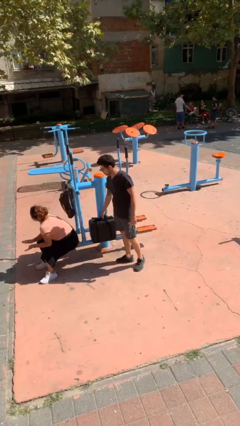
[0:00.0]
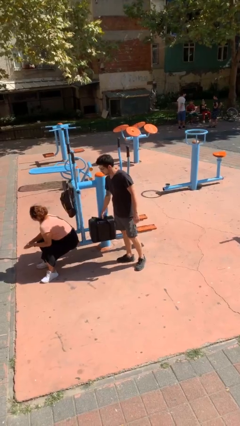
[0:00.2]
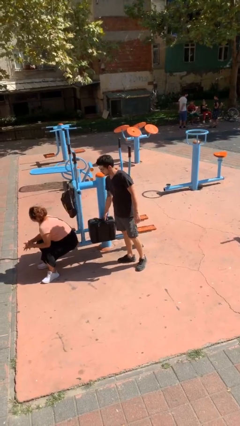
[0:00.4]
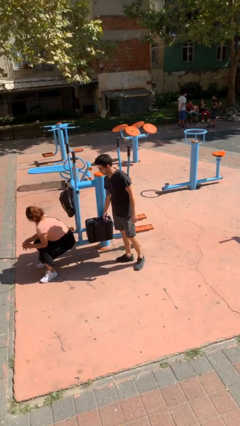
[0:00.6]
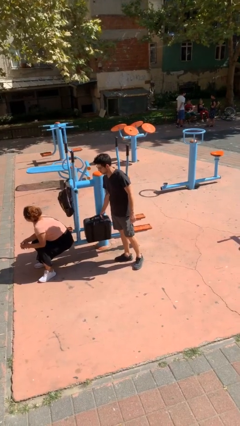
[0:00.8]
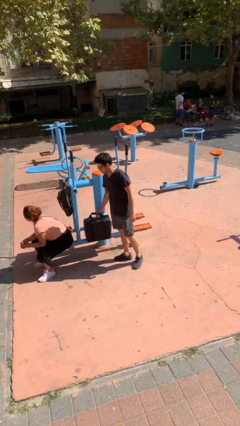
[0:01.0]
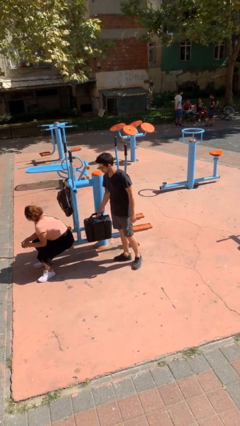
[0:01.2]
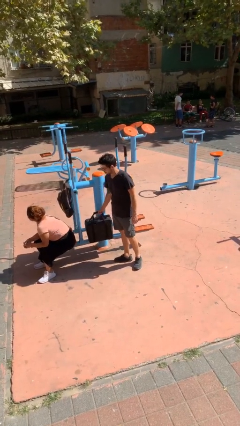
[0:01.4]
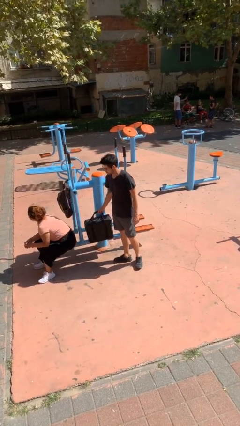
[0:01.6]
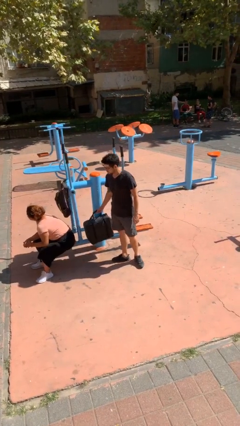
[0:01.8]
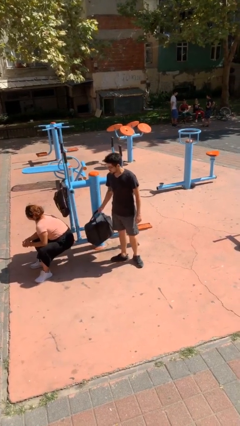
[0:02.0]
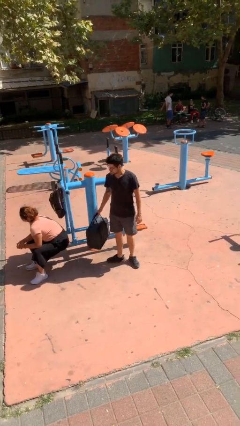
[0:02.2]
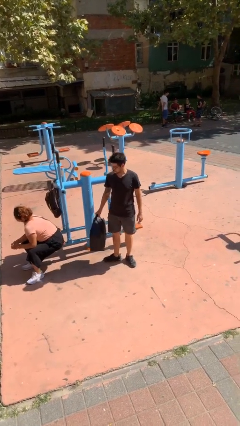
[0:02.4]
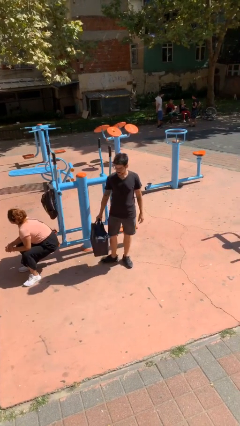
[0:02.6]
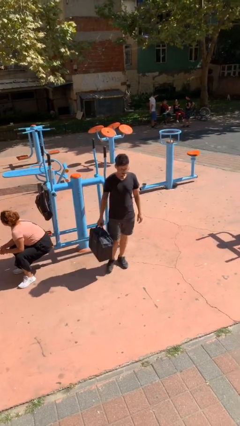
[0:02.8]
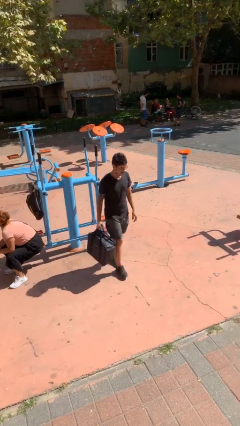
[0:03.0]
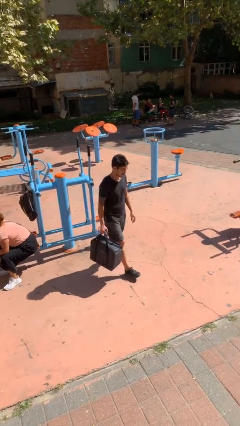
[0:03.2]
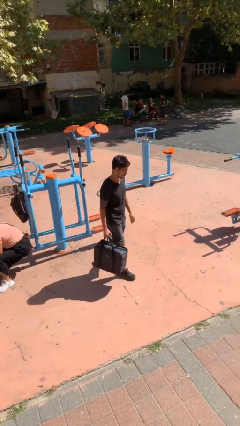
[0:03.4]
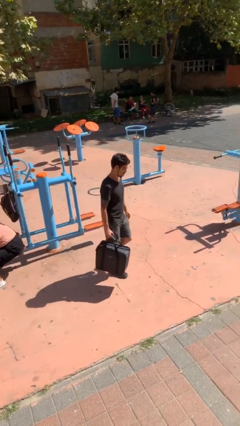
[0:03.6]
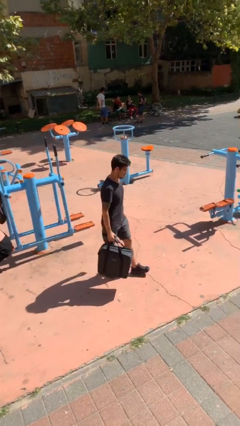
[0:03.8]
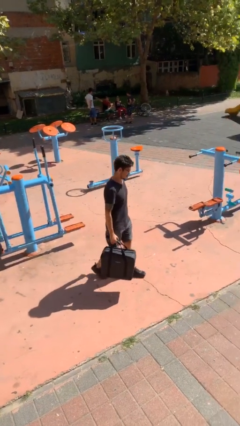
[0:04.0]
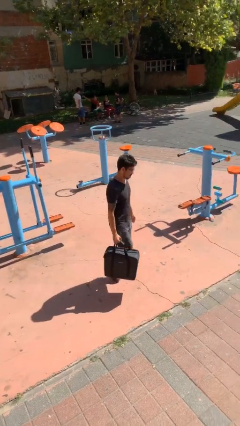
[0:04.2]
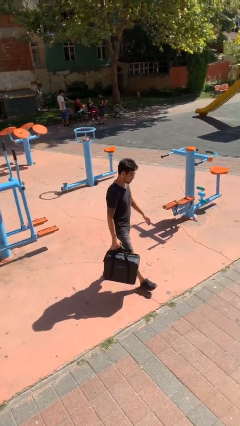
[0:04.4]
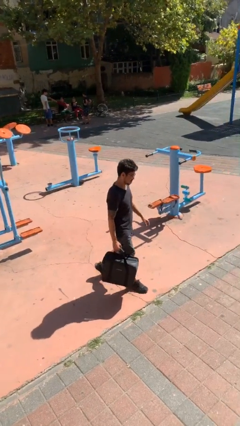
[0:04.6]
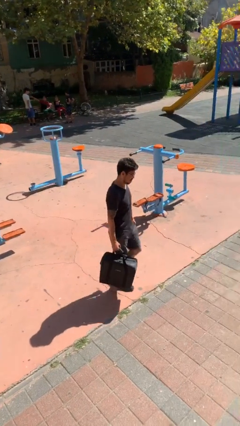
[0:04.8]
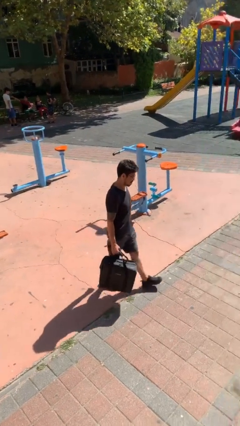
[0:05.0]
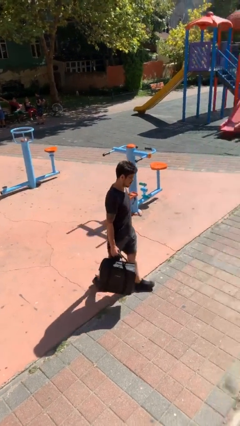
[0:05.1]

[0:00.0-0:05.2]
person steals object from person

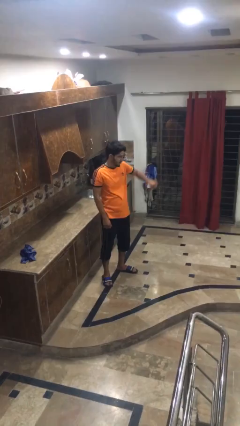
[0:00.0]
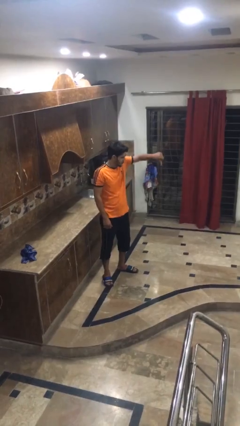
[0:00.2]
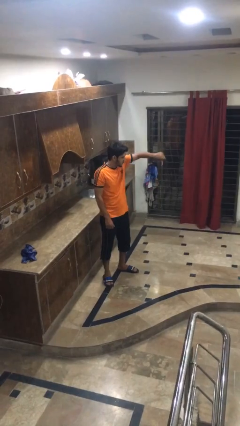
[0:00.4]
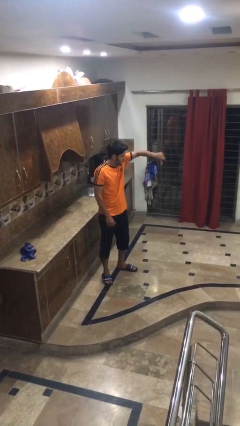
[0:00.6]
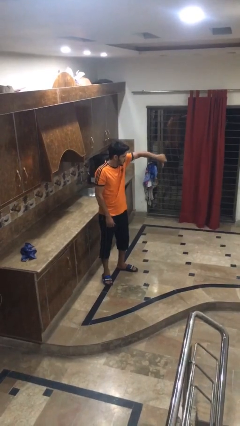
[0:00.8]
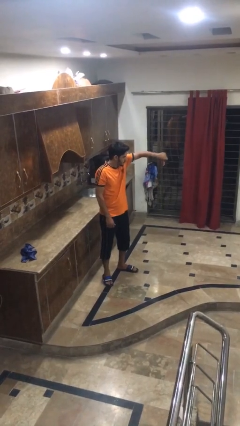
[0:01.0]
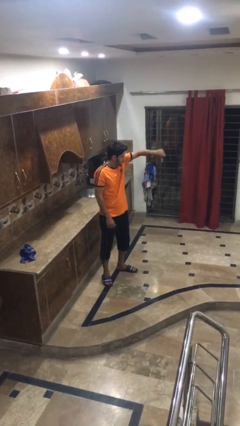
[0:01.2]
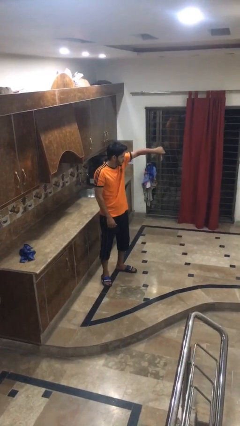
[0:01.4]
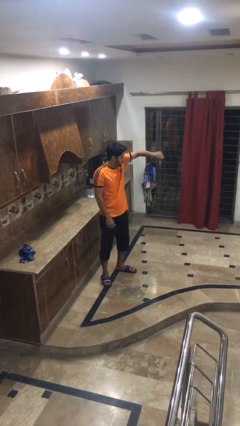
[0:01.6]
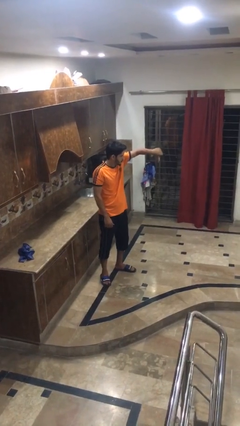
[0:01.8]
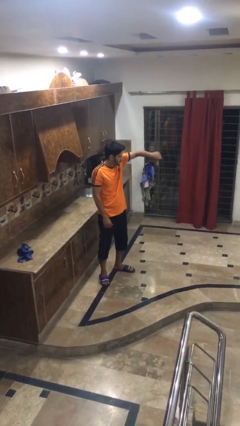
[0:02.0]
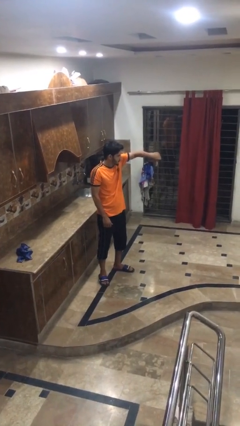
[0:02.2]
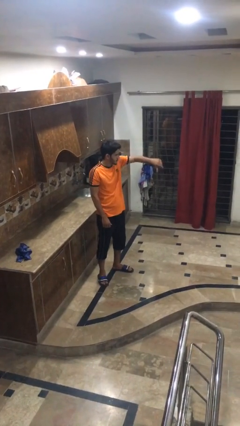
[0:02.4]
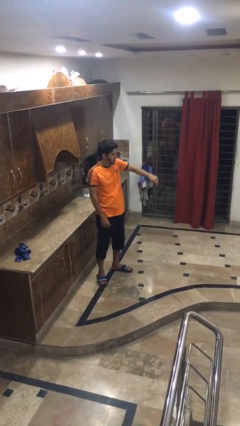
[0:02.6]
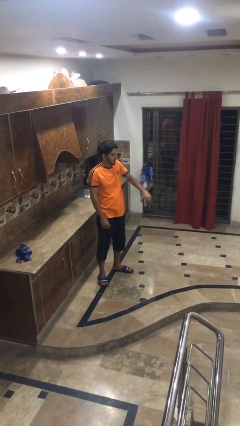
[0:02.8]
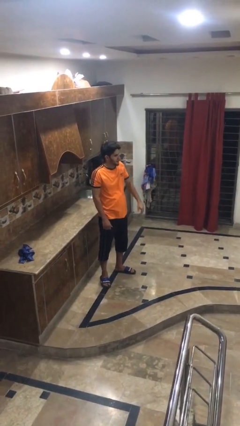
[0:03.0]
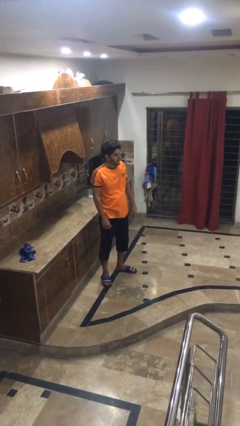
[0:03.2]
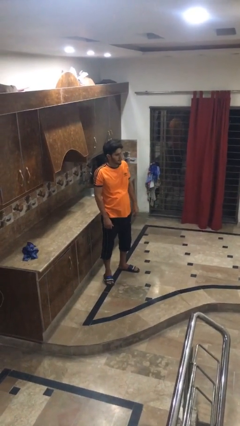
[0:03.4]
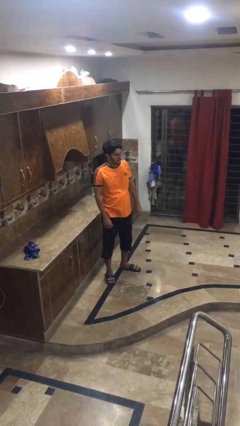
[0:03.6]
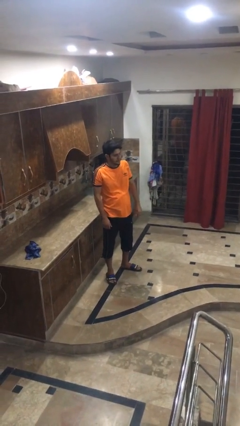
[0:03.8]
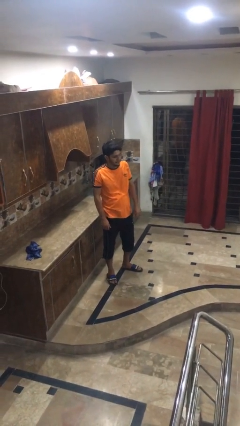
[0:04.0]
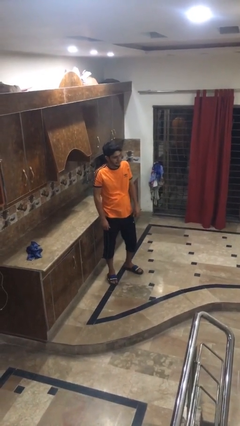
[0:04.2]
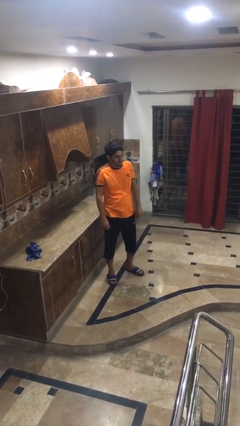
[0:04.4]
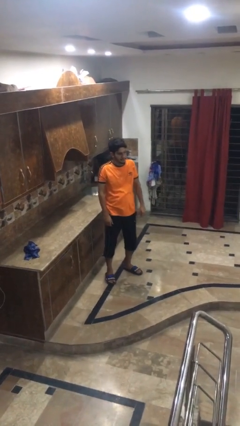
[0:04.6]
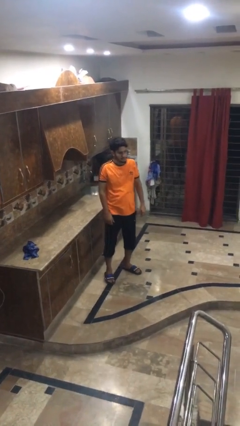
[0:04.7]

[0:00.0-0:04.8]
person gestures thumbs down

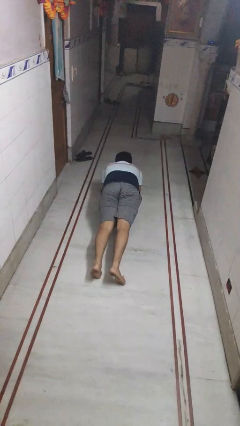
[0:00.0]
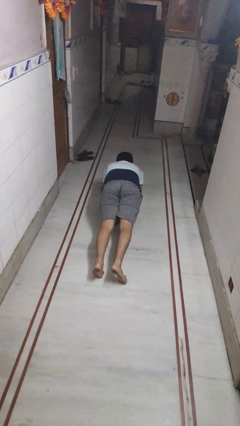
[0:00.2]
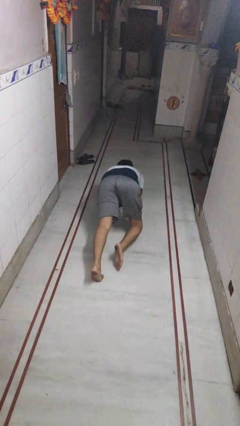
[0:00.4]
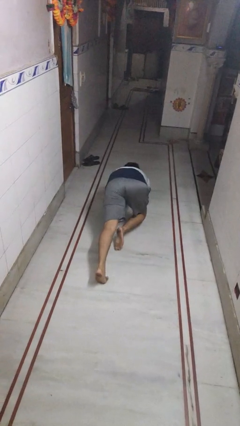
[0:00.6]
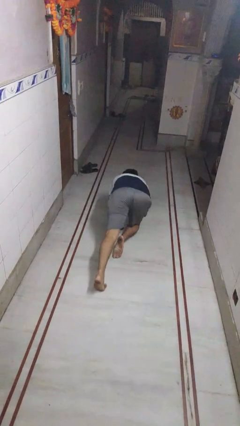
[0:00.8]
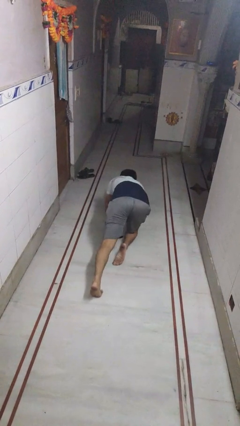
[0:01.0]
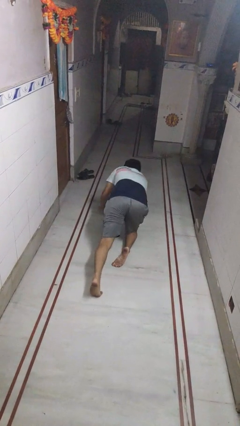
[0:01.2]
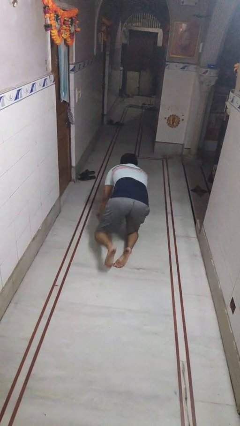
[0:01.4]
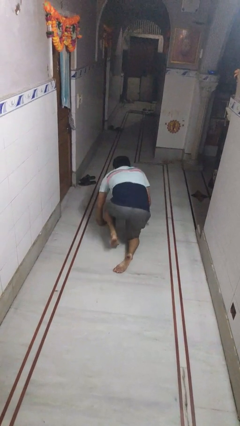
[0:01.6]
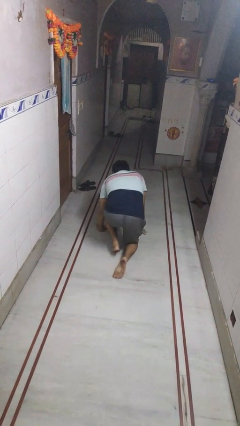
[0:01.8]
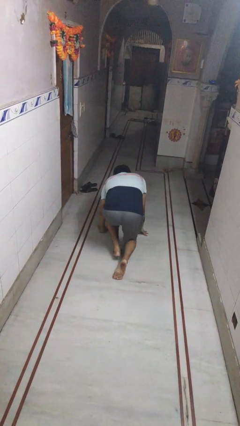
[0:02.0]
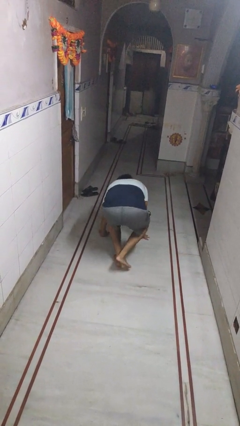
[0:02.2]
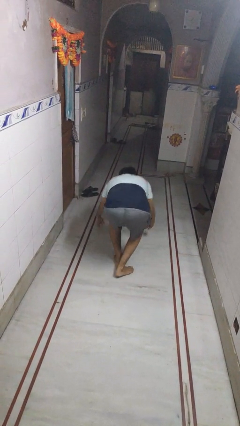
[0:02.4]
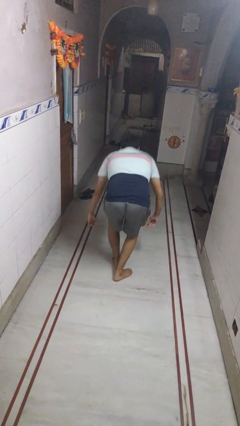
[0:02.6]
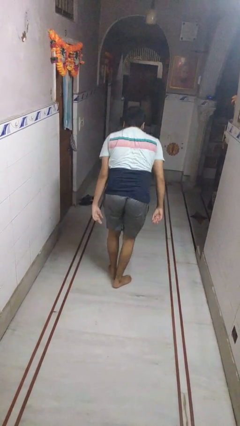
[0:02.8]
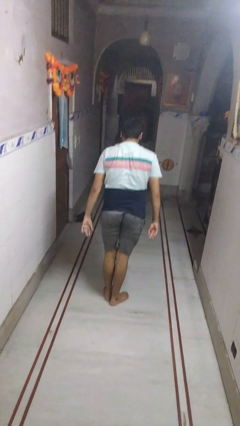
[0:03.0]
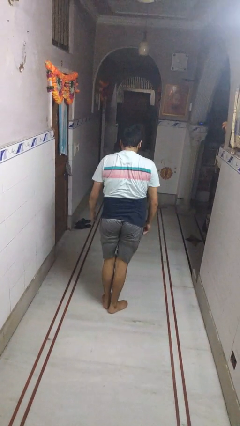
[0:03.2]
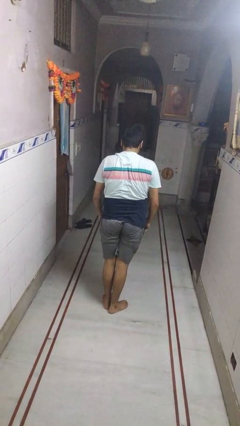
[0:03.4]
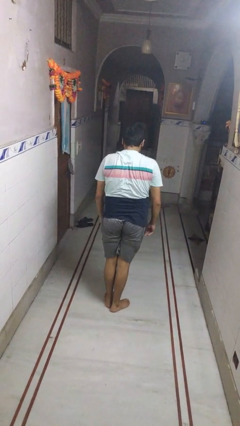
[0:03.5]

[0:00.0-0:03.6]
person stands up from floor

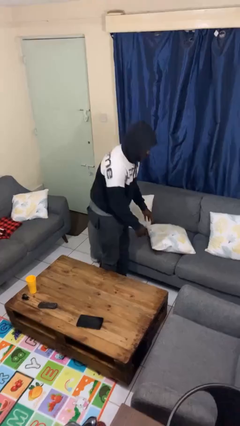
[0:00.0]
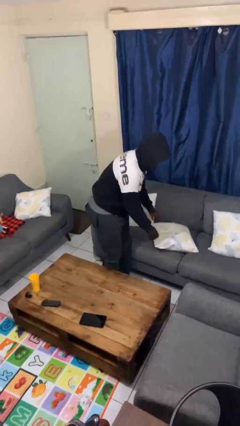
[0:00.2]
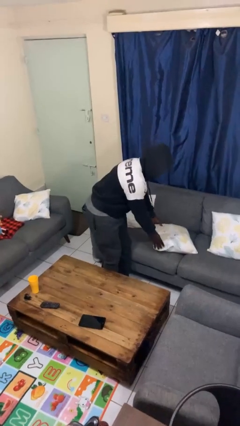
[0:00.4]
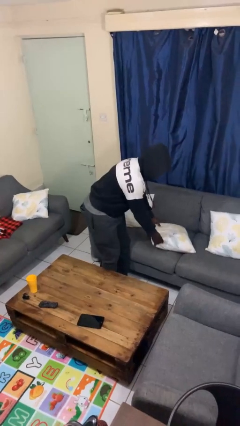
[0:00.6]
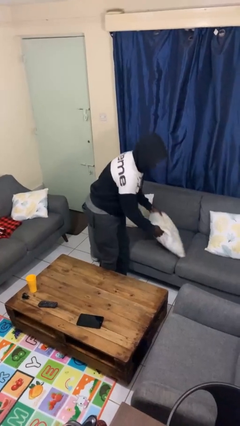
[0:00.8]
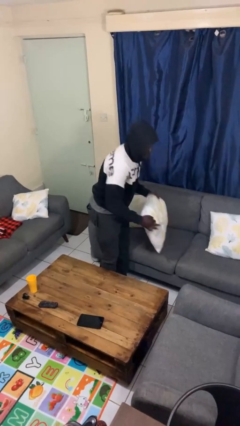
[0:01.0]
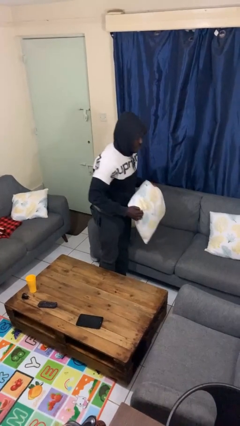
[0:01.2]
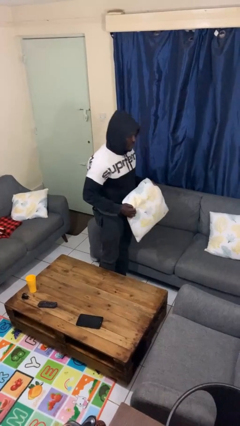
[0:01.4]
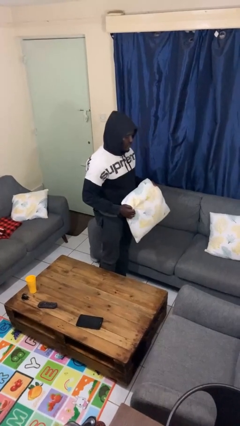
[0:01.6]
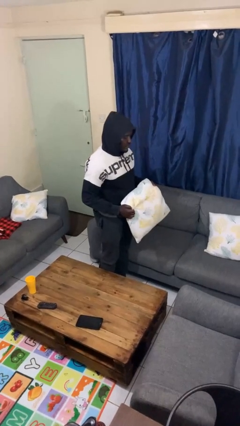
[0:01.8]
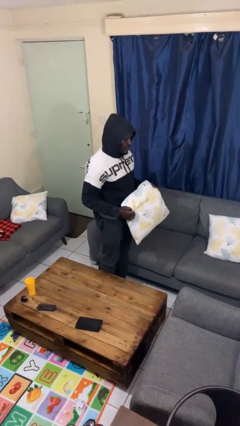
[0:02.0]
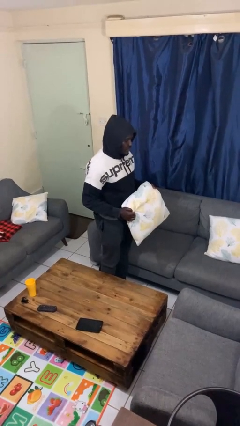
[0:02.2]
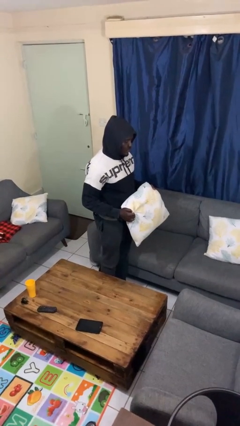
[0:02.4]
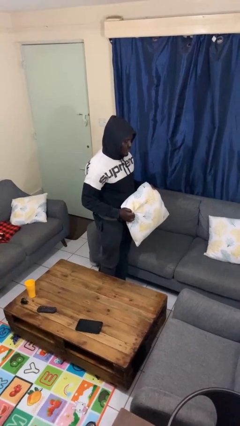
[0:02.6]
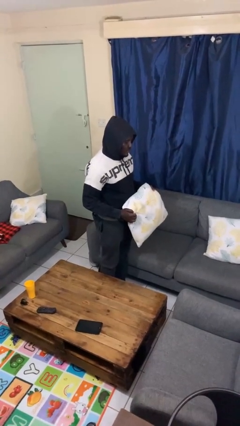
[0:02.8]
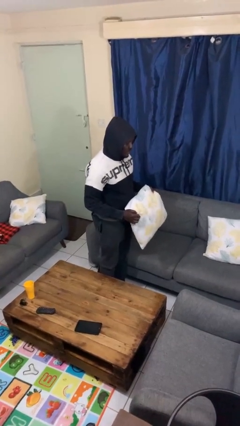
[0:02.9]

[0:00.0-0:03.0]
person picks up object from couch

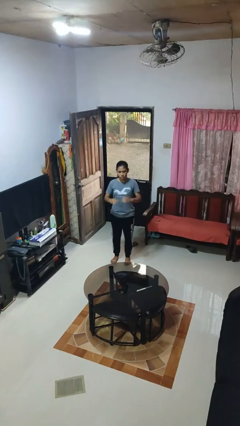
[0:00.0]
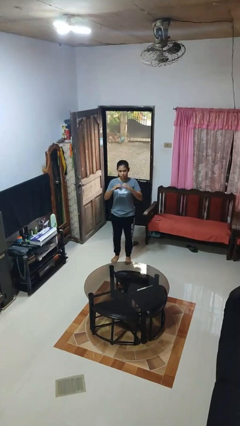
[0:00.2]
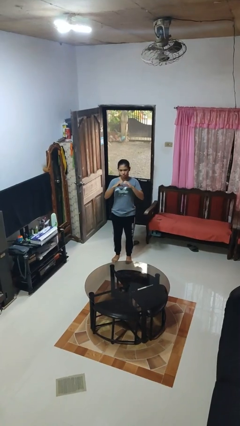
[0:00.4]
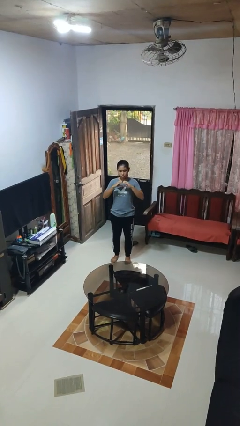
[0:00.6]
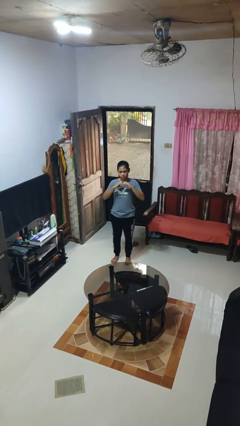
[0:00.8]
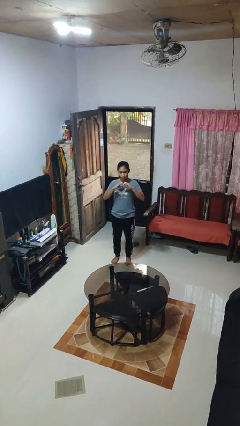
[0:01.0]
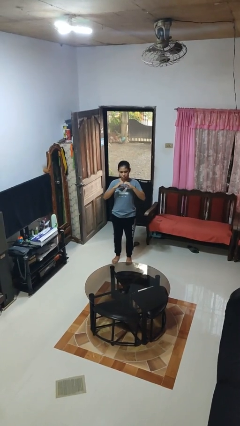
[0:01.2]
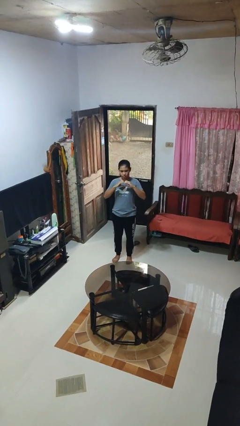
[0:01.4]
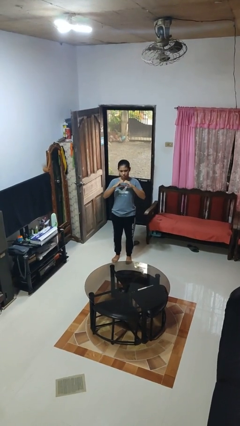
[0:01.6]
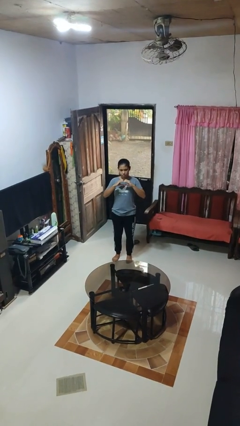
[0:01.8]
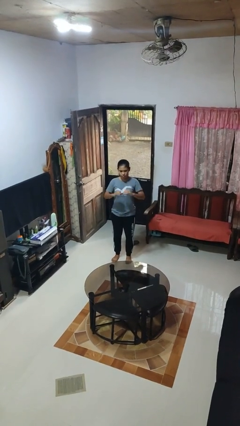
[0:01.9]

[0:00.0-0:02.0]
person gestures heart
